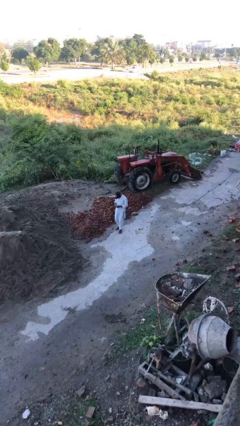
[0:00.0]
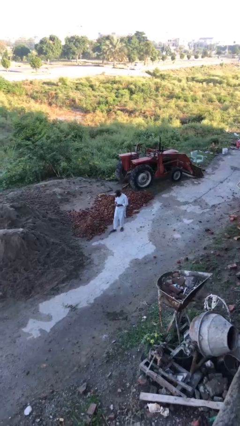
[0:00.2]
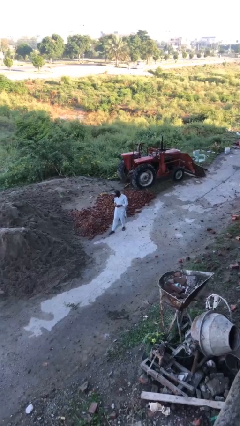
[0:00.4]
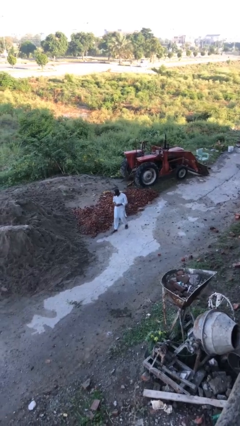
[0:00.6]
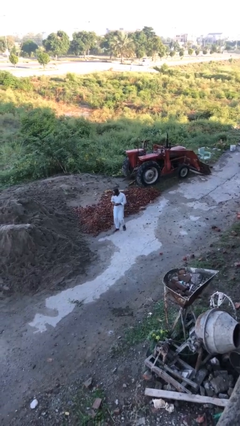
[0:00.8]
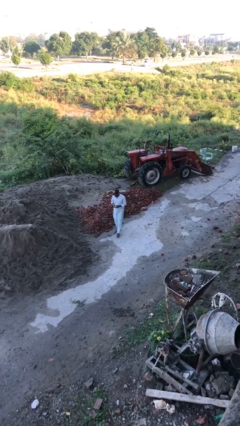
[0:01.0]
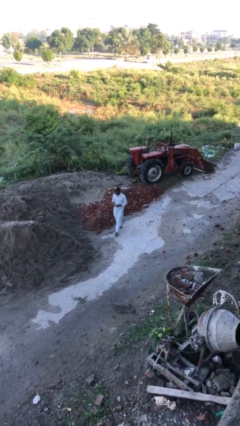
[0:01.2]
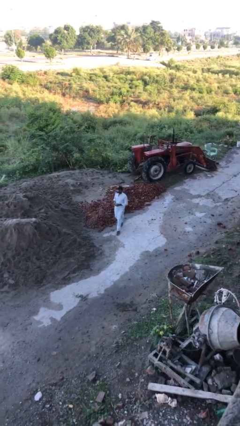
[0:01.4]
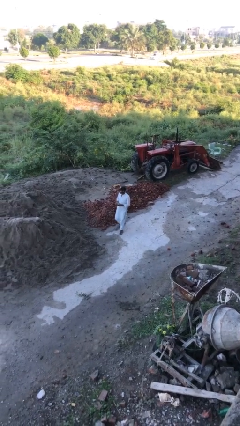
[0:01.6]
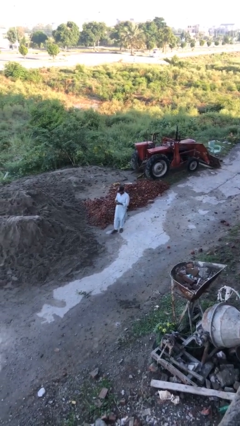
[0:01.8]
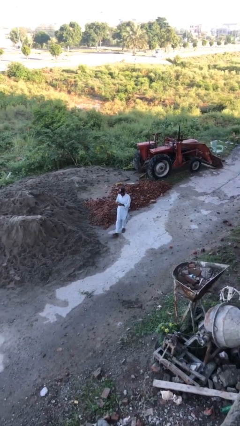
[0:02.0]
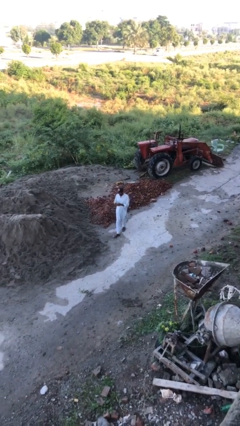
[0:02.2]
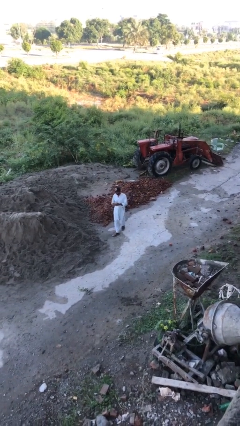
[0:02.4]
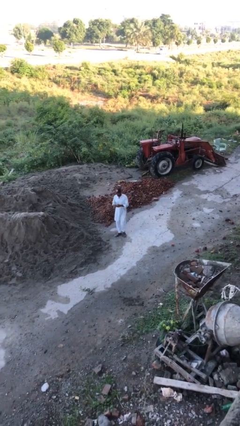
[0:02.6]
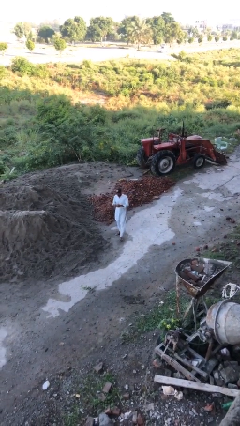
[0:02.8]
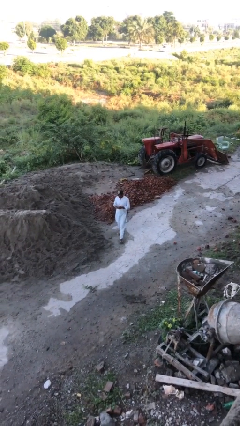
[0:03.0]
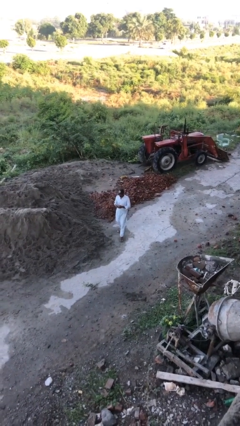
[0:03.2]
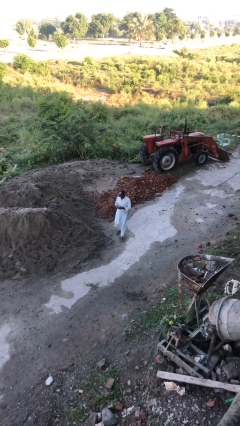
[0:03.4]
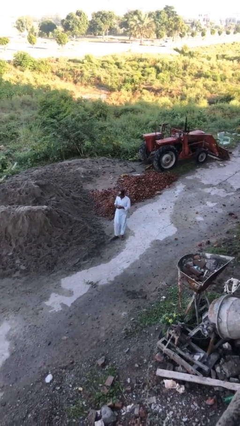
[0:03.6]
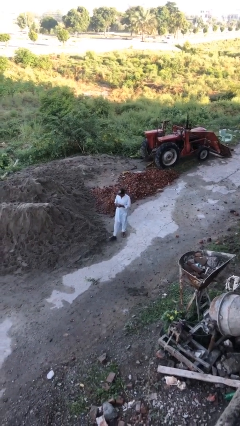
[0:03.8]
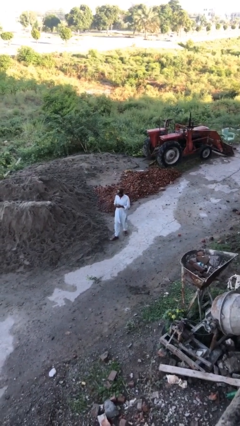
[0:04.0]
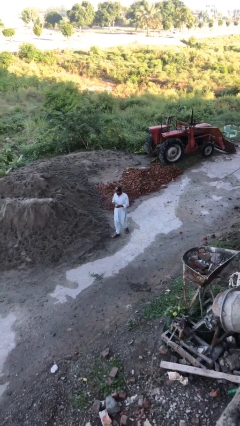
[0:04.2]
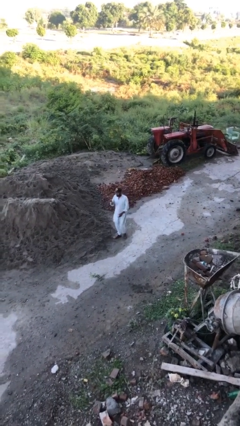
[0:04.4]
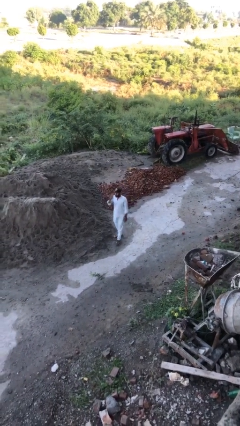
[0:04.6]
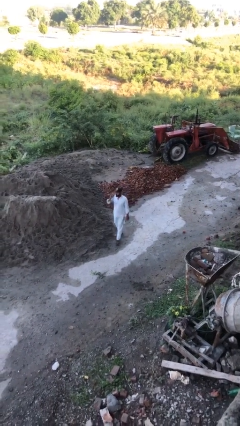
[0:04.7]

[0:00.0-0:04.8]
person texts on phone

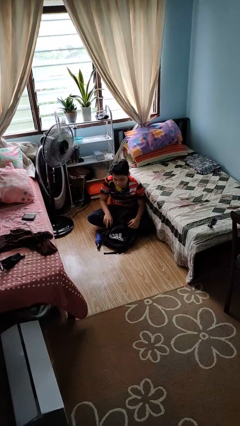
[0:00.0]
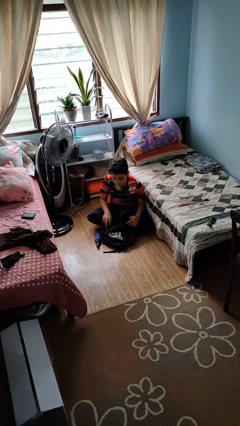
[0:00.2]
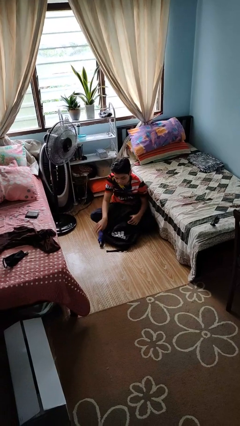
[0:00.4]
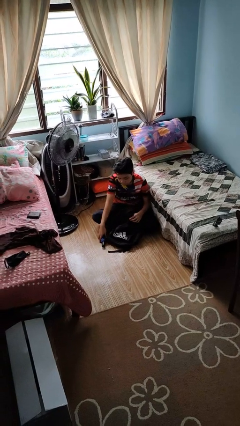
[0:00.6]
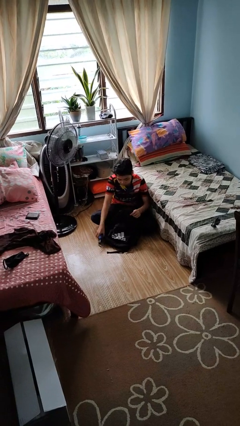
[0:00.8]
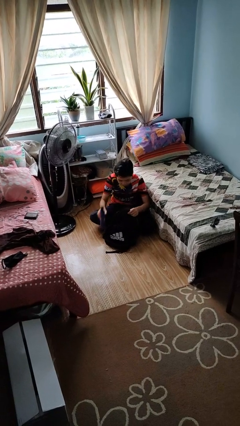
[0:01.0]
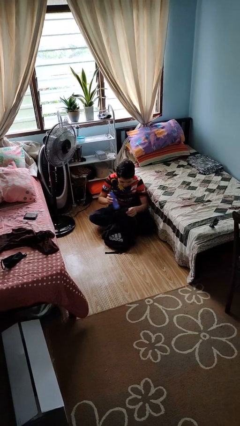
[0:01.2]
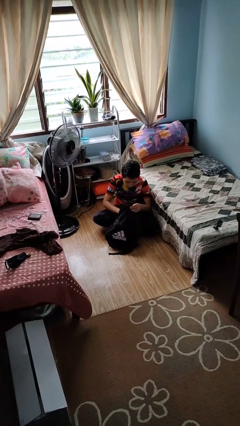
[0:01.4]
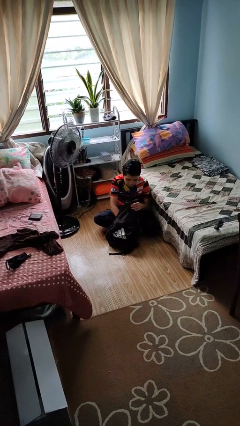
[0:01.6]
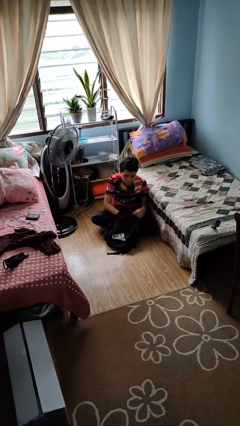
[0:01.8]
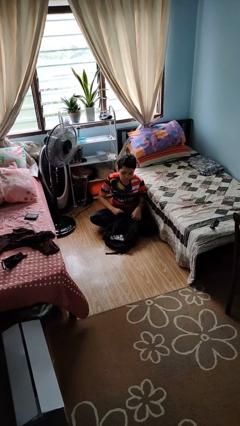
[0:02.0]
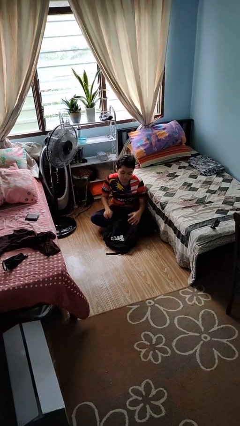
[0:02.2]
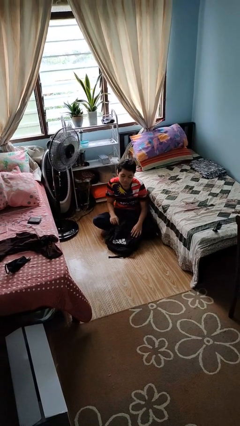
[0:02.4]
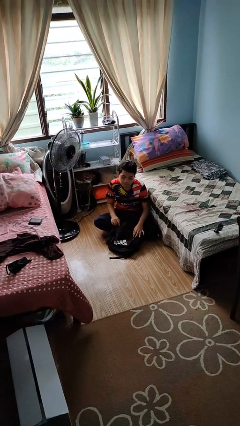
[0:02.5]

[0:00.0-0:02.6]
person puts object into backpack

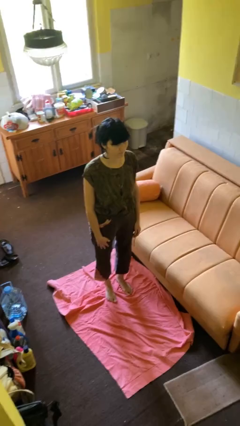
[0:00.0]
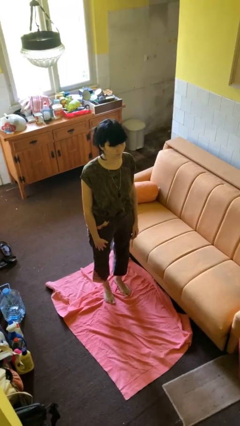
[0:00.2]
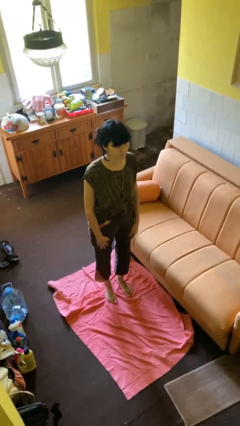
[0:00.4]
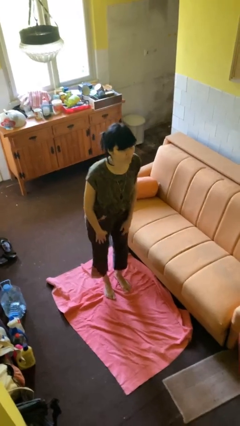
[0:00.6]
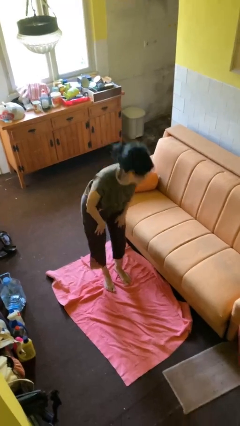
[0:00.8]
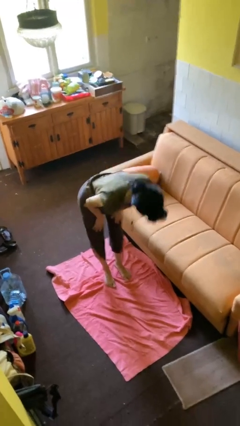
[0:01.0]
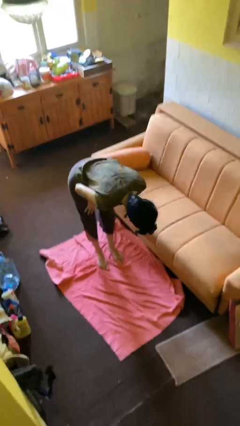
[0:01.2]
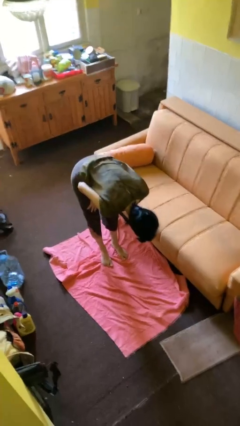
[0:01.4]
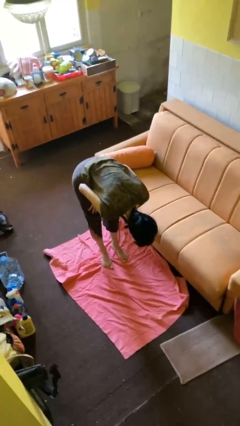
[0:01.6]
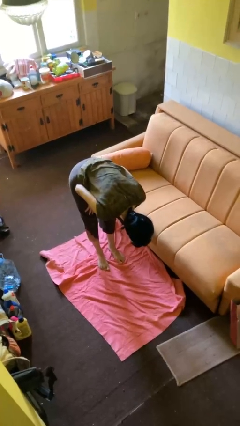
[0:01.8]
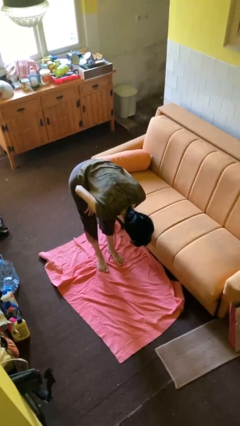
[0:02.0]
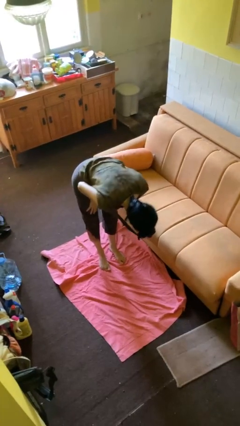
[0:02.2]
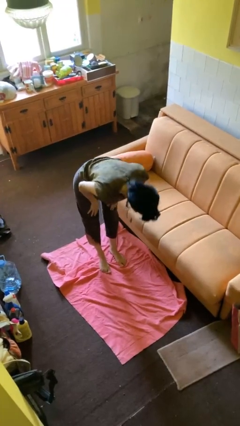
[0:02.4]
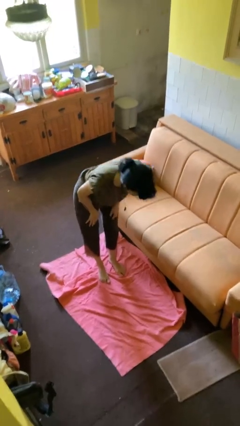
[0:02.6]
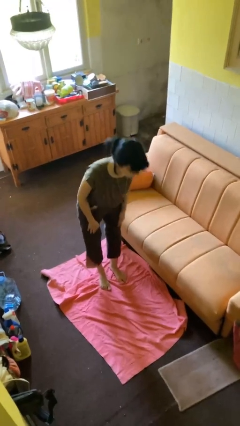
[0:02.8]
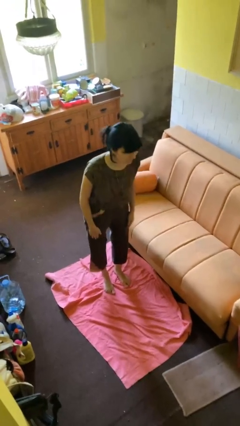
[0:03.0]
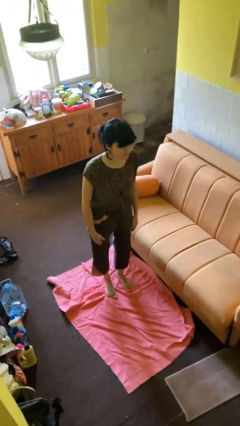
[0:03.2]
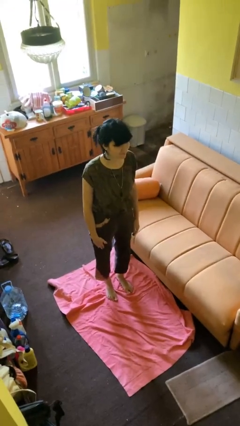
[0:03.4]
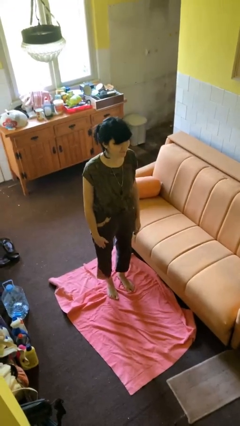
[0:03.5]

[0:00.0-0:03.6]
person bows

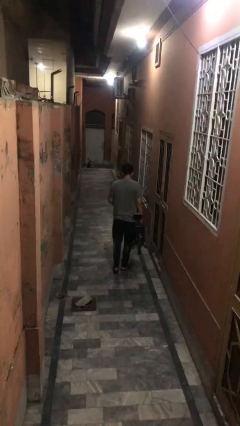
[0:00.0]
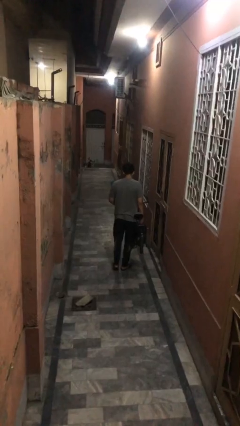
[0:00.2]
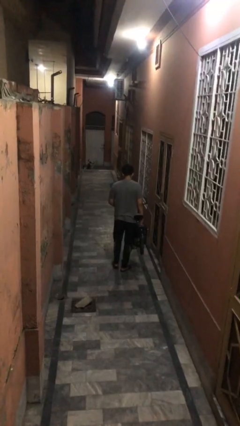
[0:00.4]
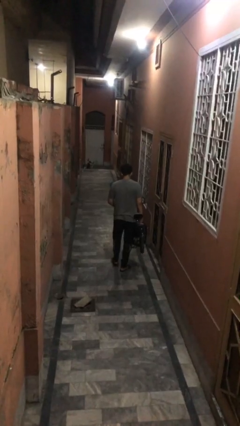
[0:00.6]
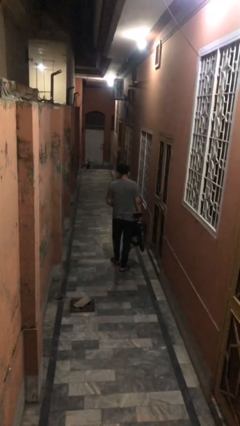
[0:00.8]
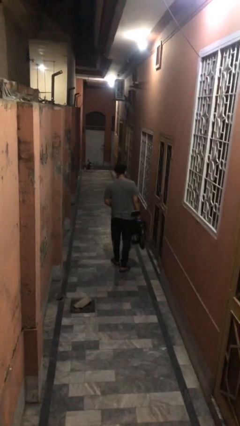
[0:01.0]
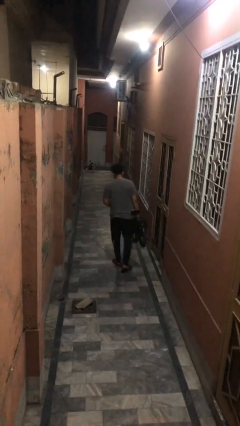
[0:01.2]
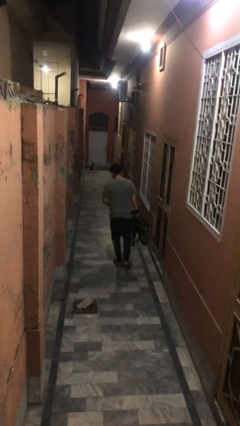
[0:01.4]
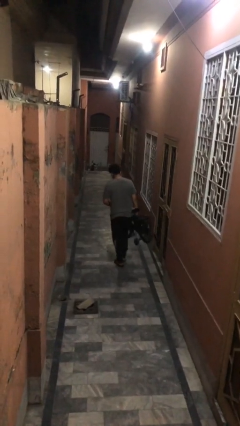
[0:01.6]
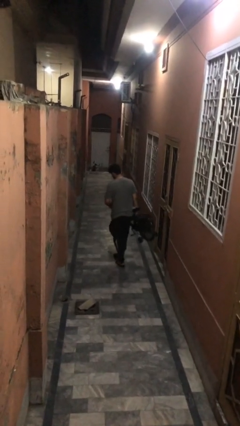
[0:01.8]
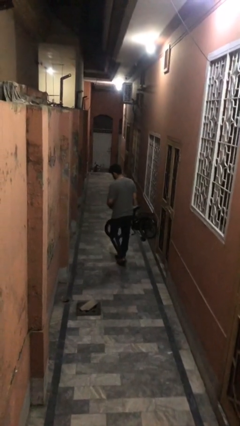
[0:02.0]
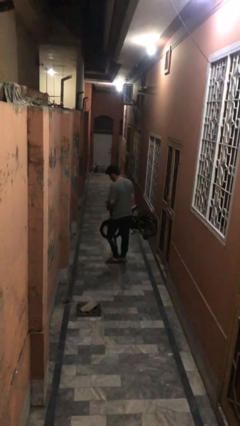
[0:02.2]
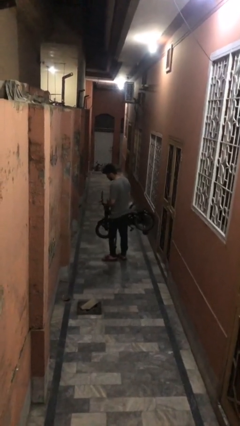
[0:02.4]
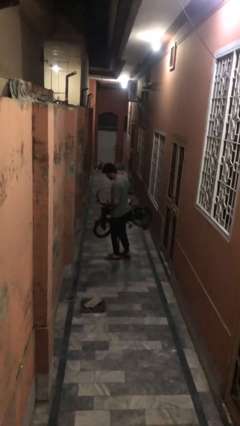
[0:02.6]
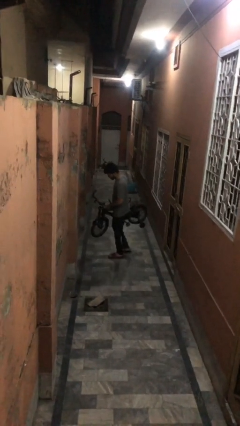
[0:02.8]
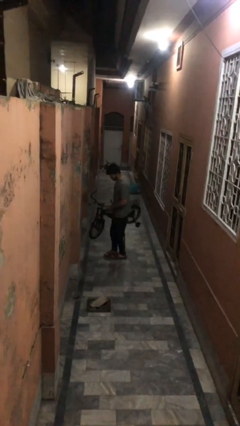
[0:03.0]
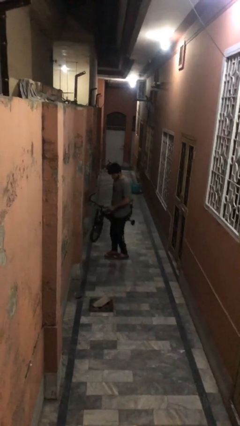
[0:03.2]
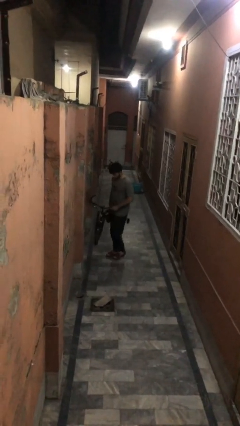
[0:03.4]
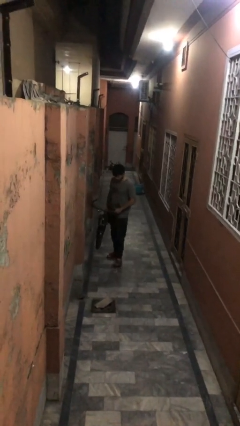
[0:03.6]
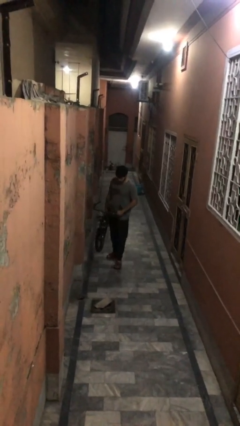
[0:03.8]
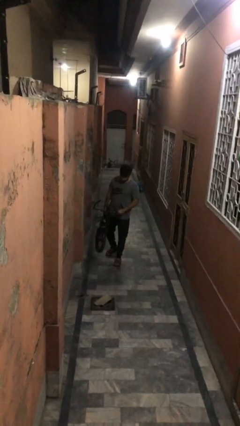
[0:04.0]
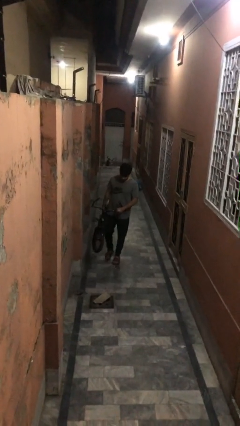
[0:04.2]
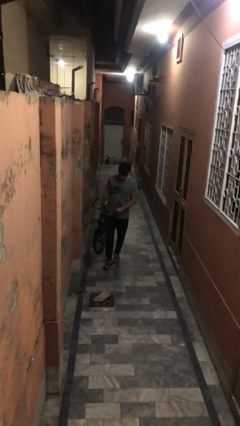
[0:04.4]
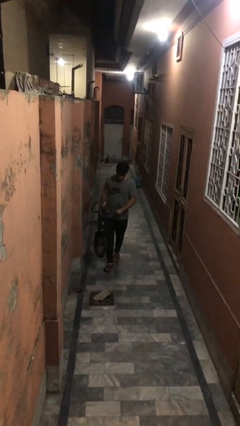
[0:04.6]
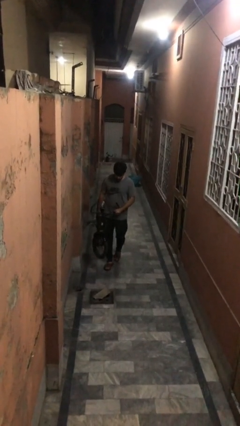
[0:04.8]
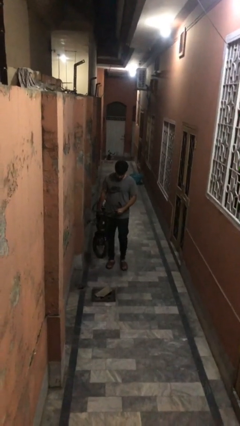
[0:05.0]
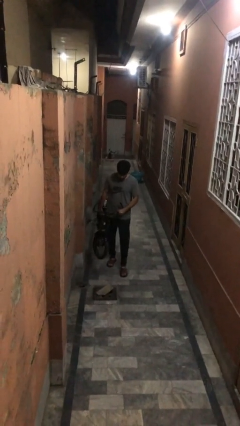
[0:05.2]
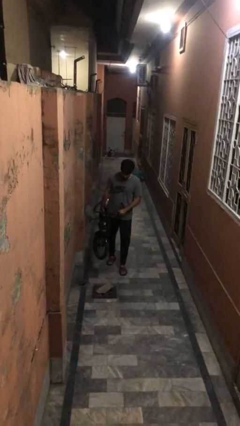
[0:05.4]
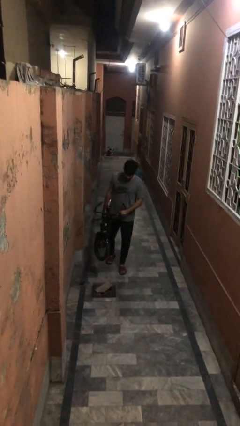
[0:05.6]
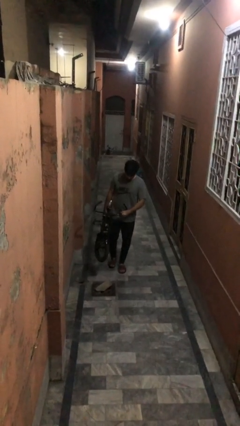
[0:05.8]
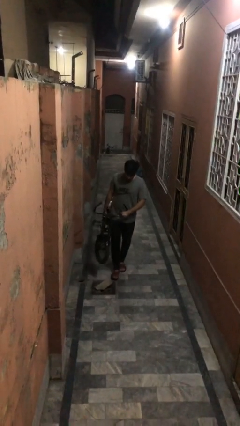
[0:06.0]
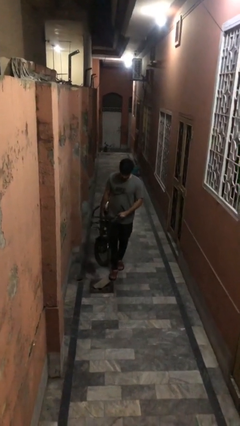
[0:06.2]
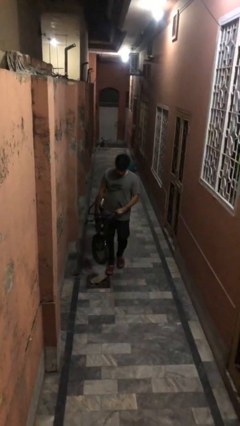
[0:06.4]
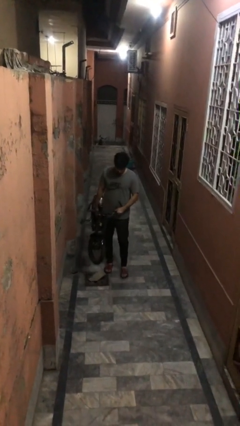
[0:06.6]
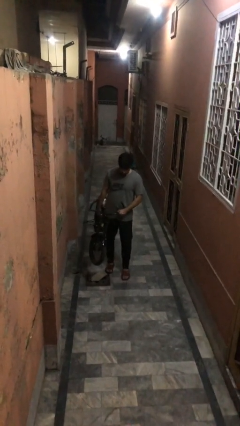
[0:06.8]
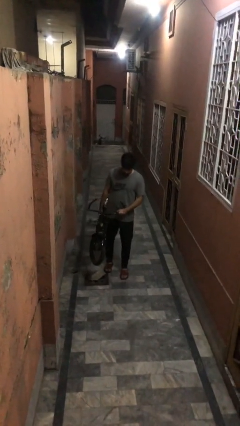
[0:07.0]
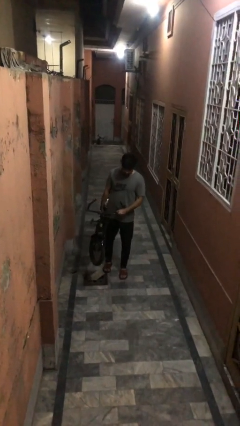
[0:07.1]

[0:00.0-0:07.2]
person carries bicycle
